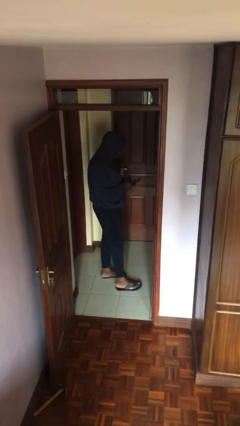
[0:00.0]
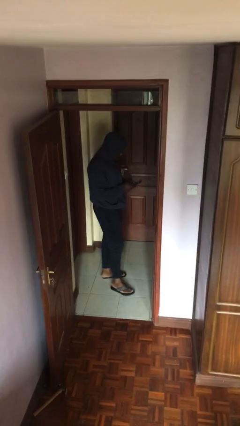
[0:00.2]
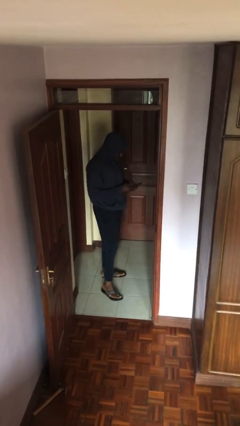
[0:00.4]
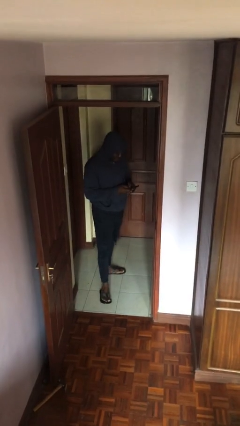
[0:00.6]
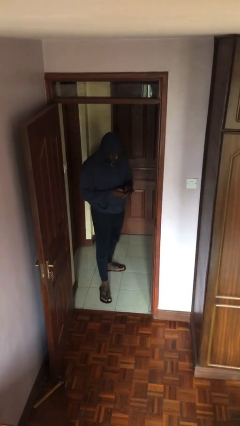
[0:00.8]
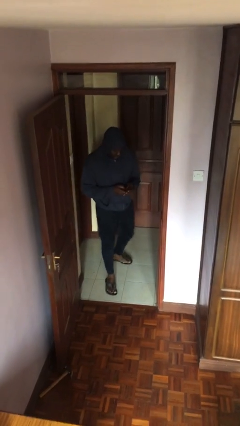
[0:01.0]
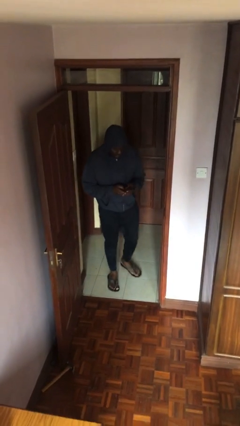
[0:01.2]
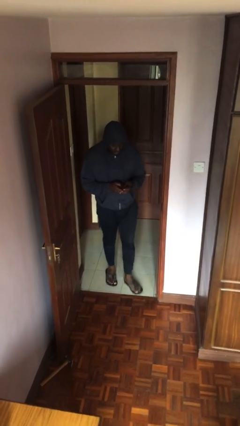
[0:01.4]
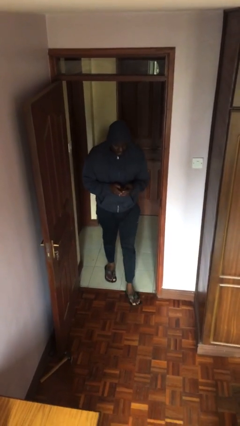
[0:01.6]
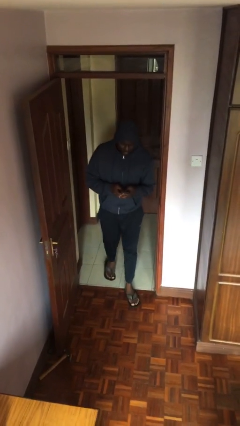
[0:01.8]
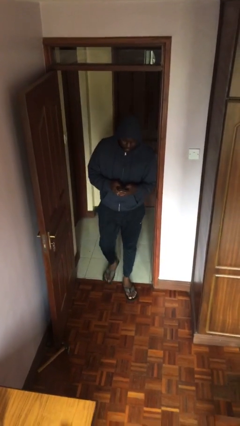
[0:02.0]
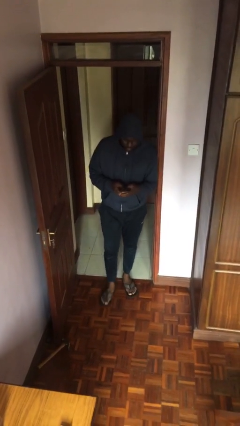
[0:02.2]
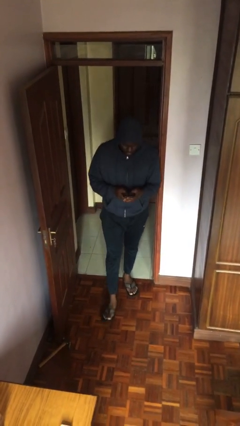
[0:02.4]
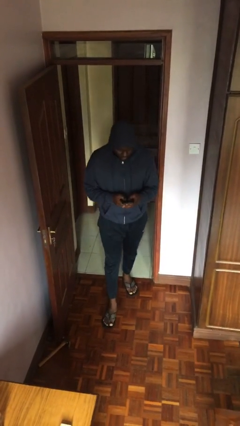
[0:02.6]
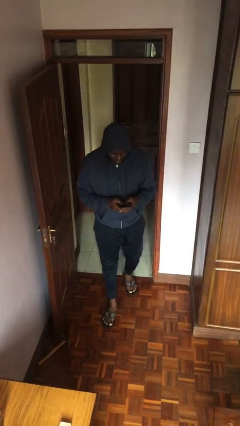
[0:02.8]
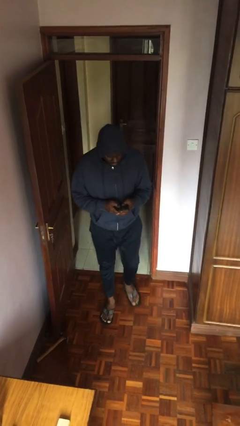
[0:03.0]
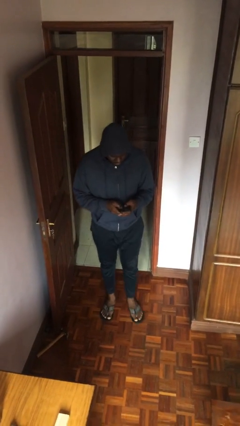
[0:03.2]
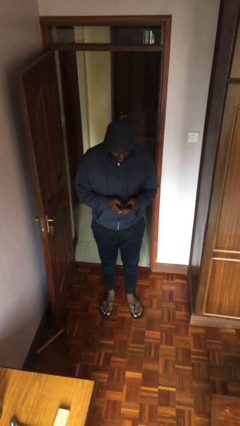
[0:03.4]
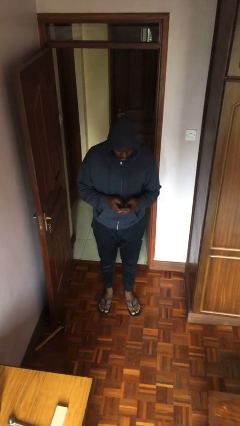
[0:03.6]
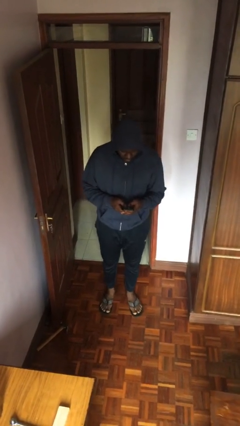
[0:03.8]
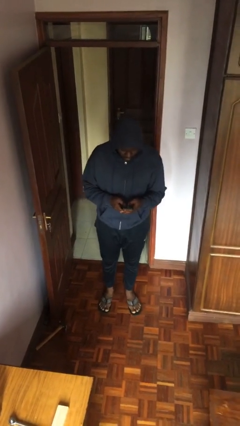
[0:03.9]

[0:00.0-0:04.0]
person enters scene through structure

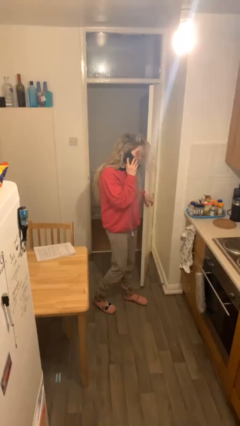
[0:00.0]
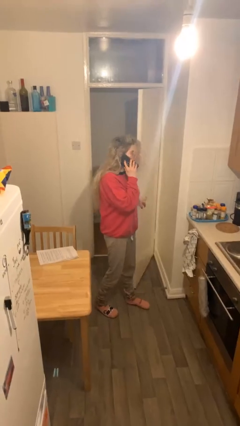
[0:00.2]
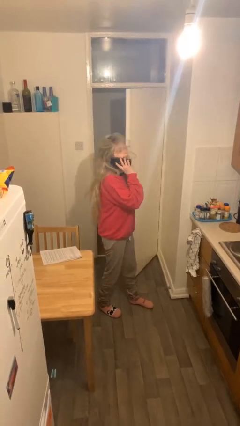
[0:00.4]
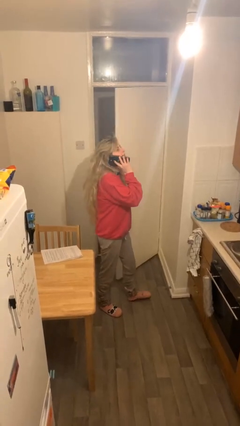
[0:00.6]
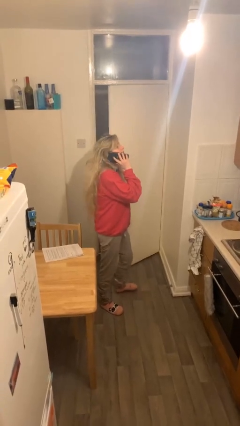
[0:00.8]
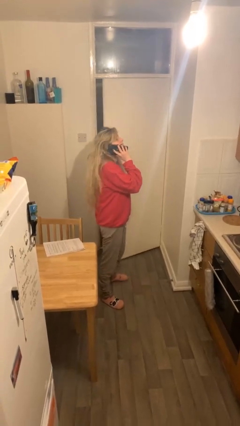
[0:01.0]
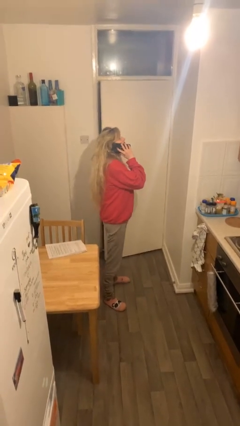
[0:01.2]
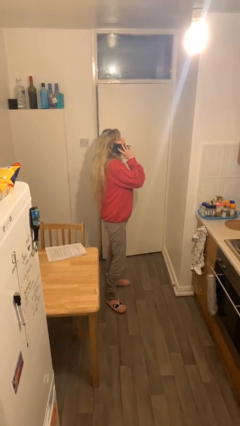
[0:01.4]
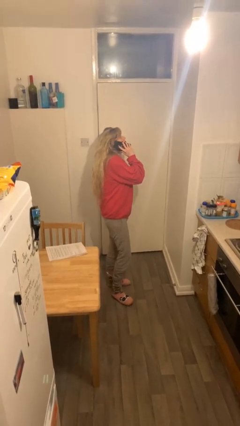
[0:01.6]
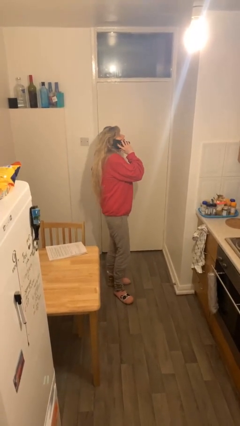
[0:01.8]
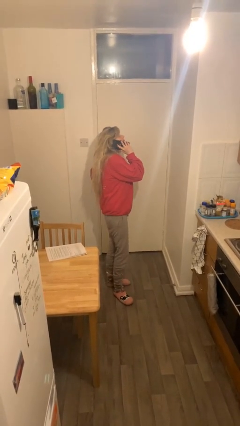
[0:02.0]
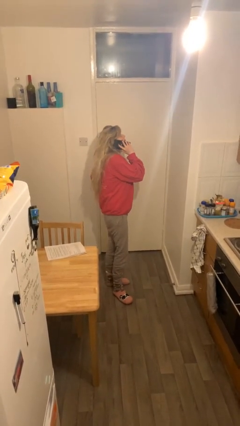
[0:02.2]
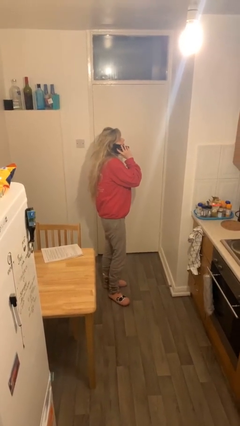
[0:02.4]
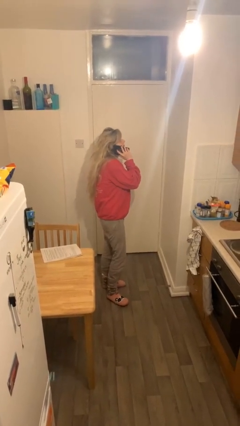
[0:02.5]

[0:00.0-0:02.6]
person closes facility door

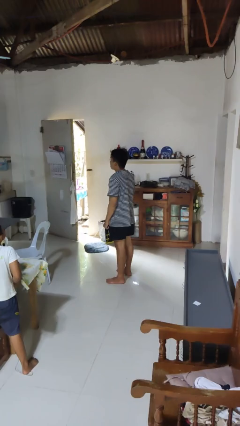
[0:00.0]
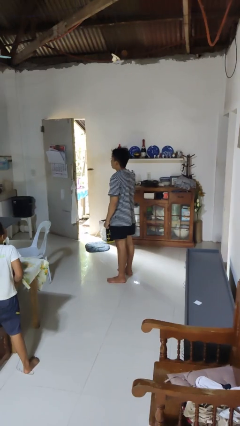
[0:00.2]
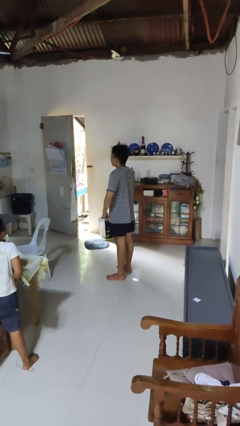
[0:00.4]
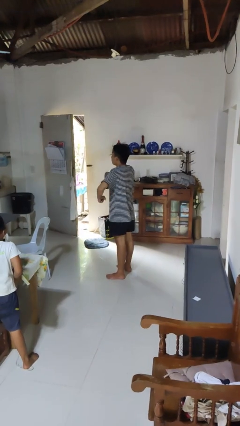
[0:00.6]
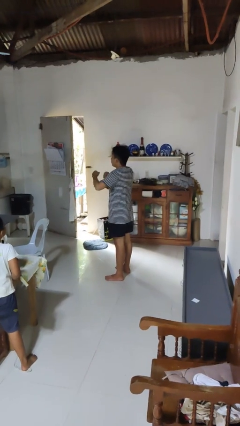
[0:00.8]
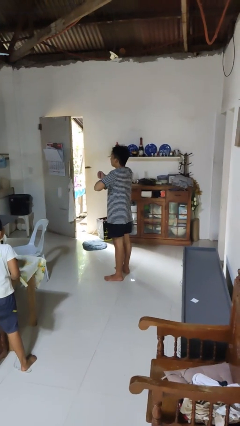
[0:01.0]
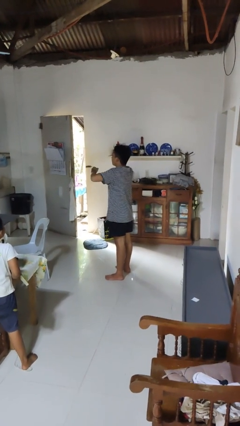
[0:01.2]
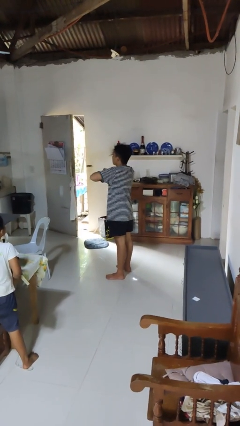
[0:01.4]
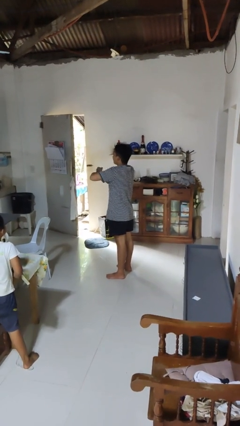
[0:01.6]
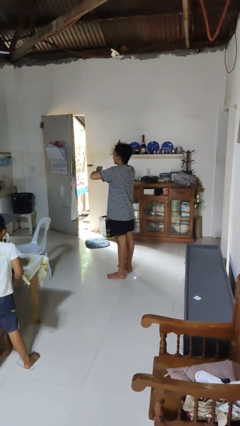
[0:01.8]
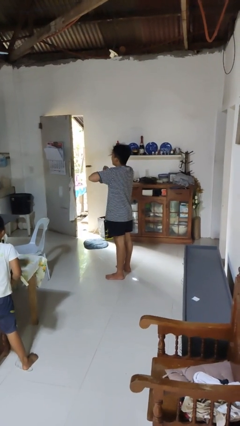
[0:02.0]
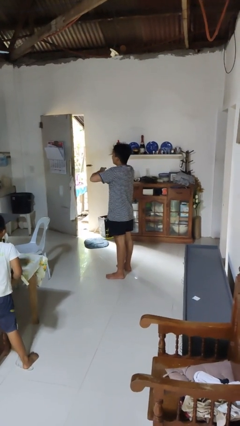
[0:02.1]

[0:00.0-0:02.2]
person drums on chest

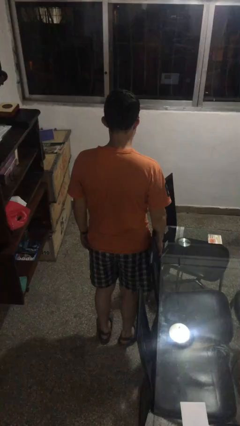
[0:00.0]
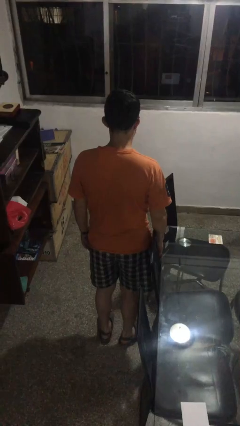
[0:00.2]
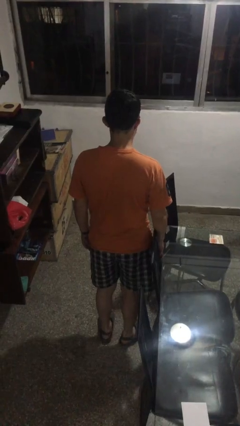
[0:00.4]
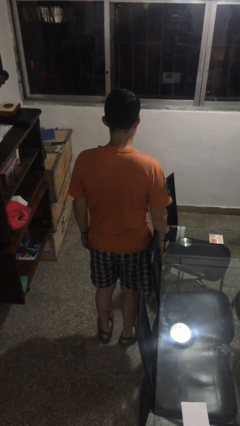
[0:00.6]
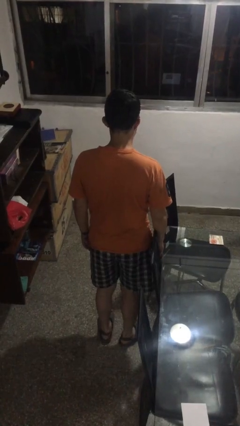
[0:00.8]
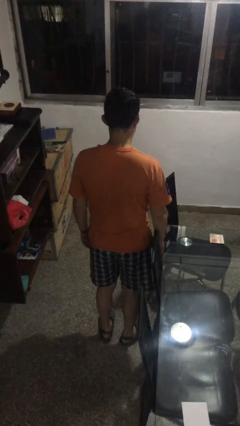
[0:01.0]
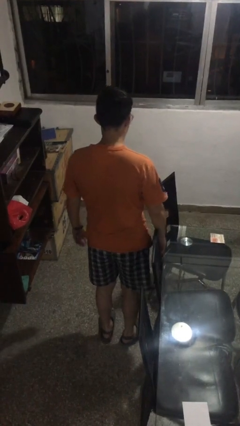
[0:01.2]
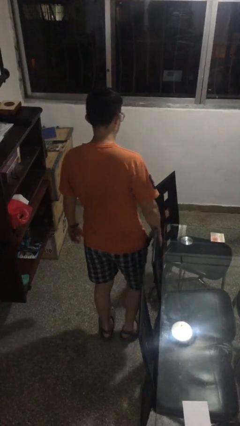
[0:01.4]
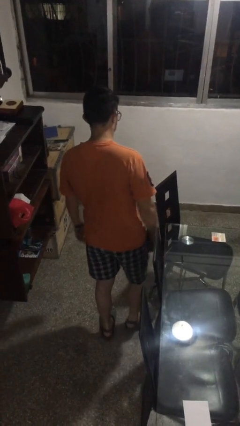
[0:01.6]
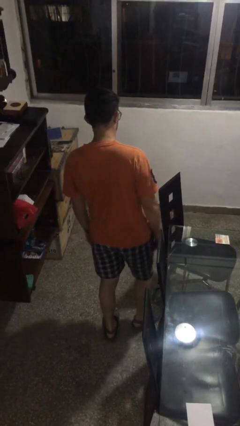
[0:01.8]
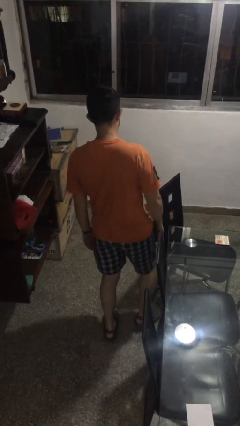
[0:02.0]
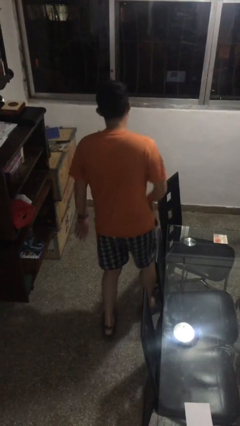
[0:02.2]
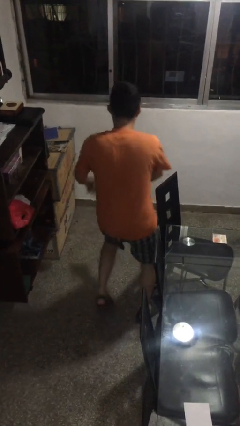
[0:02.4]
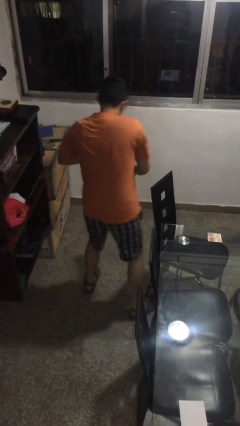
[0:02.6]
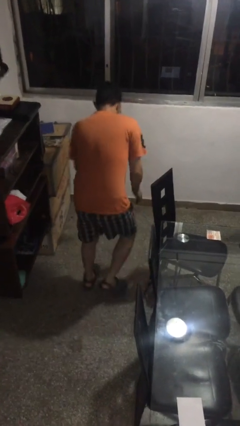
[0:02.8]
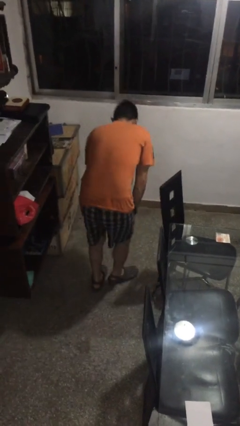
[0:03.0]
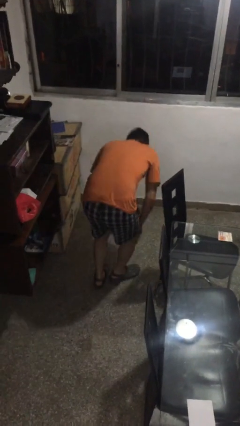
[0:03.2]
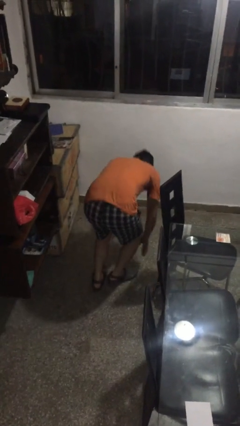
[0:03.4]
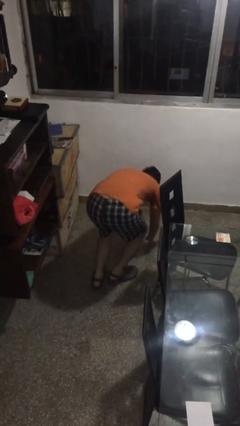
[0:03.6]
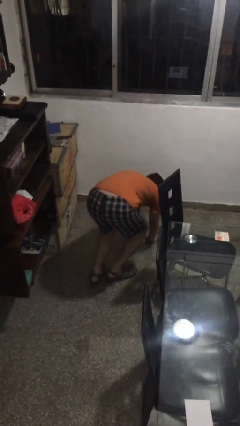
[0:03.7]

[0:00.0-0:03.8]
person trips on object on floor

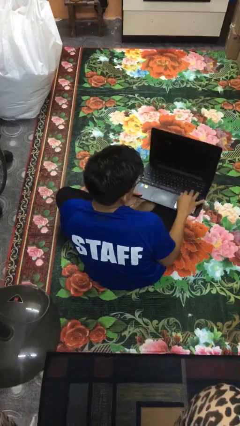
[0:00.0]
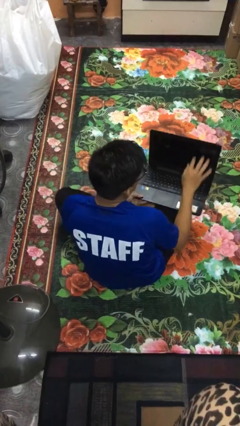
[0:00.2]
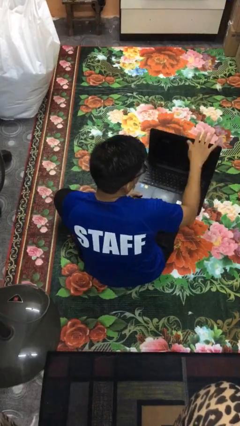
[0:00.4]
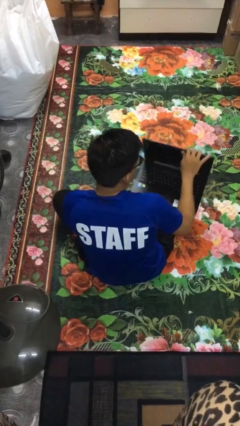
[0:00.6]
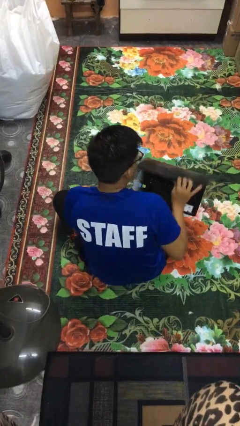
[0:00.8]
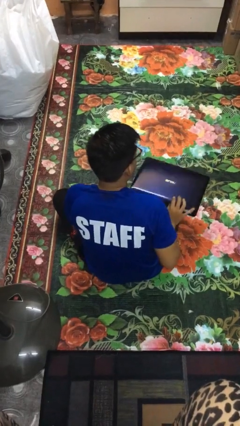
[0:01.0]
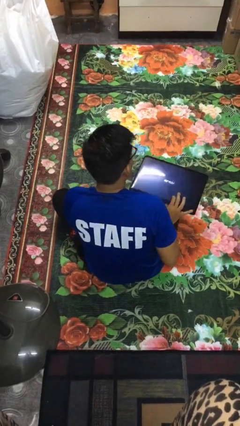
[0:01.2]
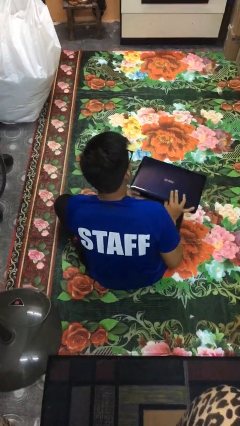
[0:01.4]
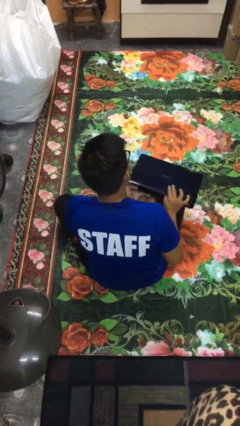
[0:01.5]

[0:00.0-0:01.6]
person closes laptop

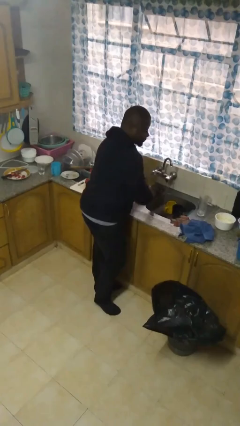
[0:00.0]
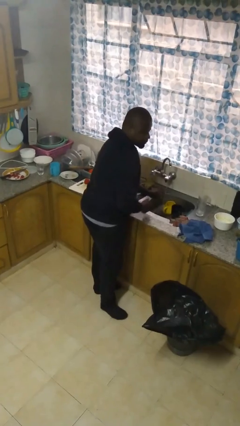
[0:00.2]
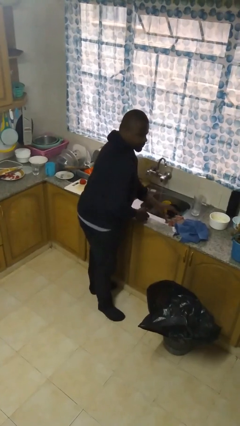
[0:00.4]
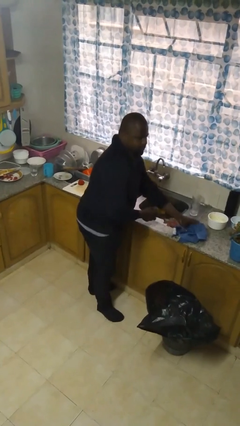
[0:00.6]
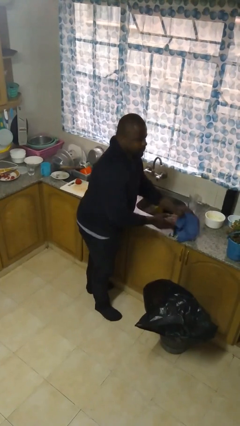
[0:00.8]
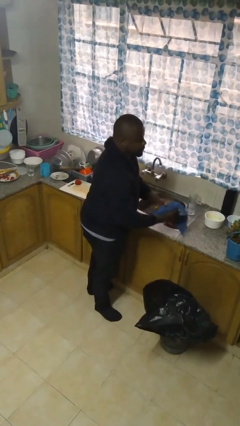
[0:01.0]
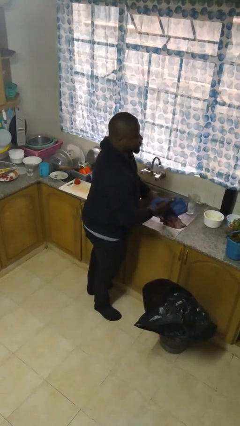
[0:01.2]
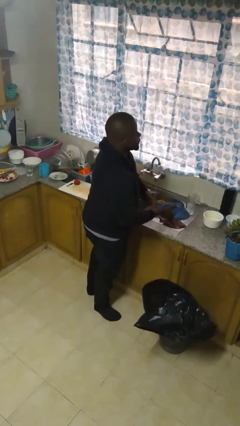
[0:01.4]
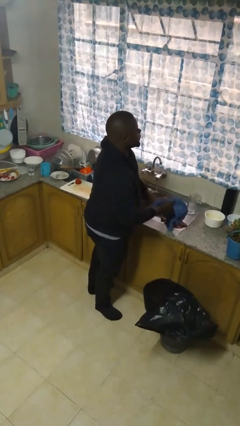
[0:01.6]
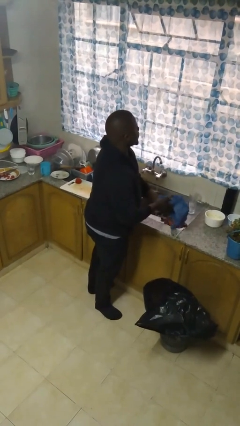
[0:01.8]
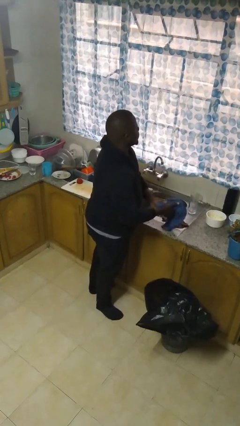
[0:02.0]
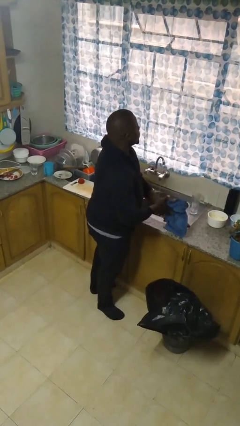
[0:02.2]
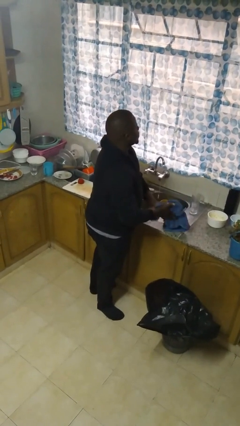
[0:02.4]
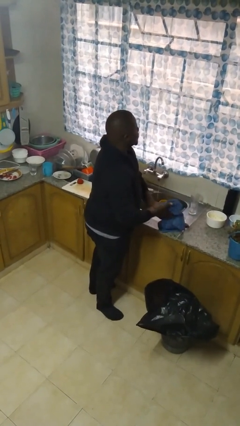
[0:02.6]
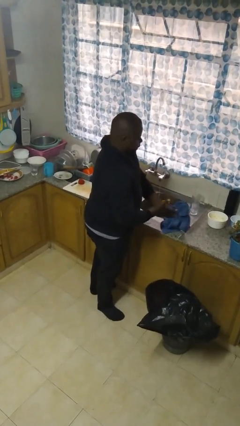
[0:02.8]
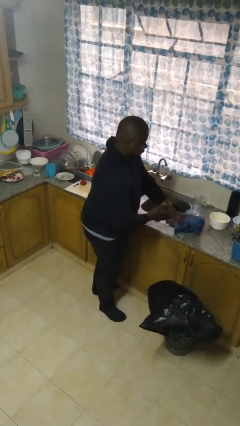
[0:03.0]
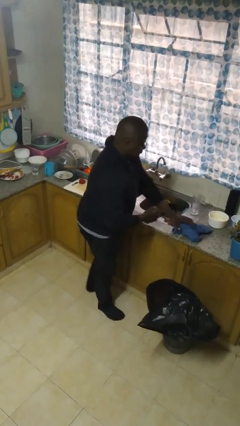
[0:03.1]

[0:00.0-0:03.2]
person dries hands with towel
